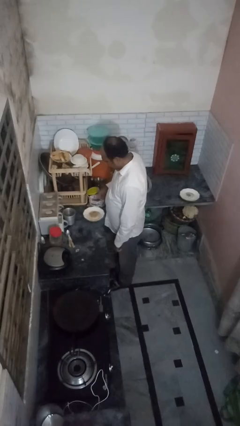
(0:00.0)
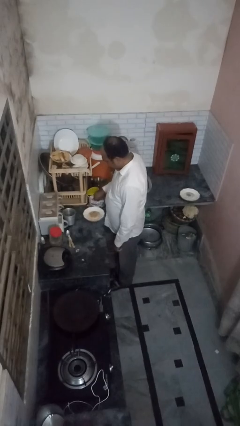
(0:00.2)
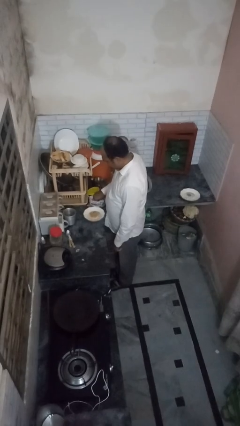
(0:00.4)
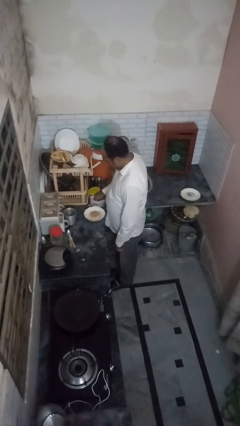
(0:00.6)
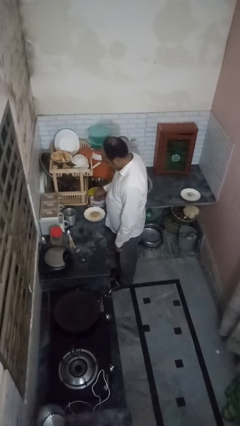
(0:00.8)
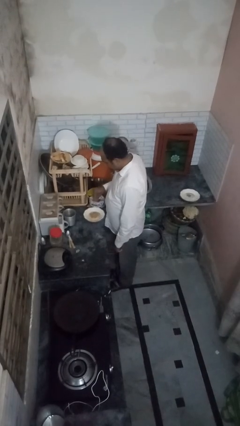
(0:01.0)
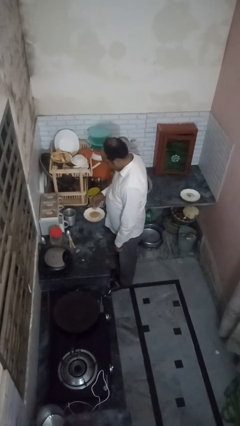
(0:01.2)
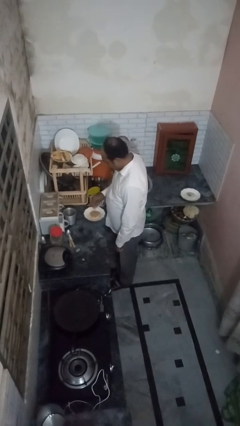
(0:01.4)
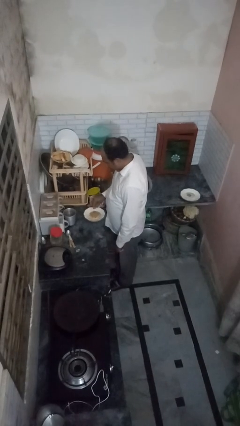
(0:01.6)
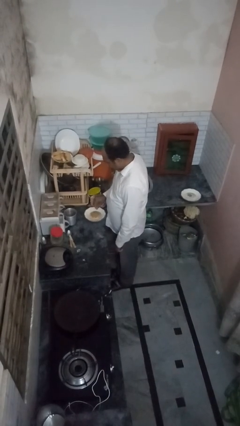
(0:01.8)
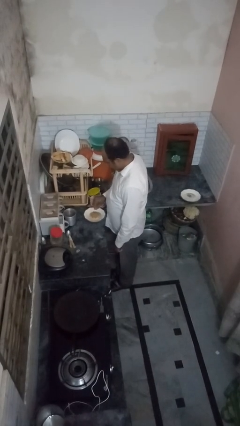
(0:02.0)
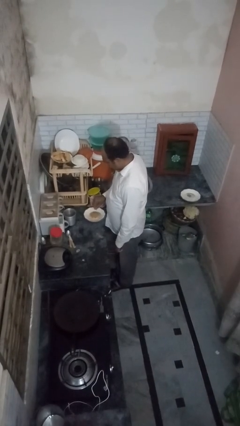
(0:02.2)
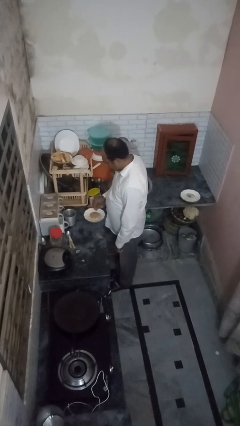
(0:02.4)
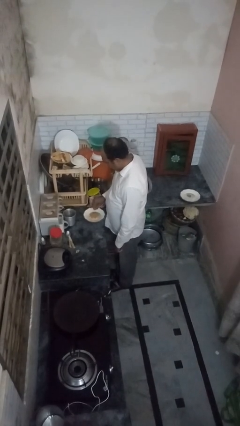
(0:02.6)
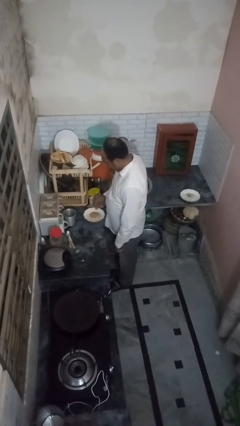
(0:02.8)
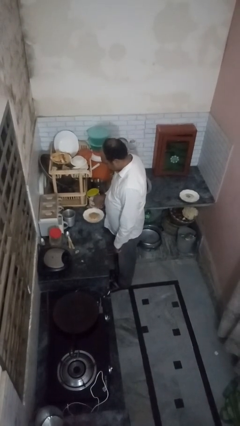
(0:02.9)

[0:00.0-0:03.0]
person pours into bowl

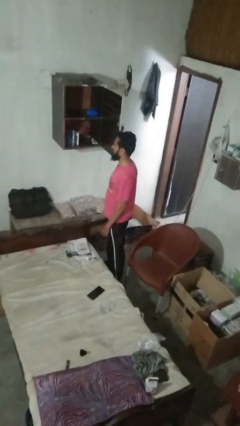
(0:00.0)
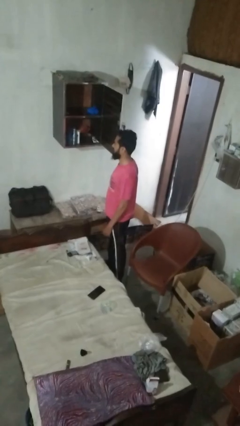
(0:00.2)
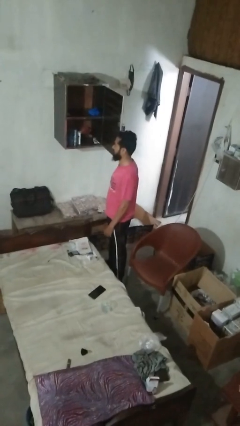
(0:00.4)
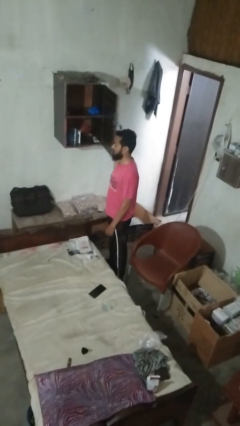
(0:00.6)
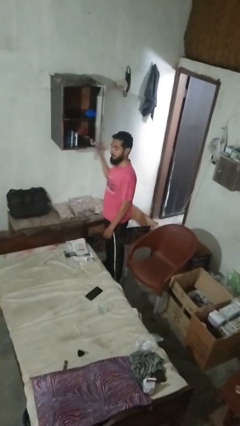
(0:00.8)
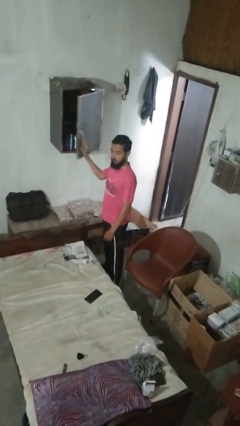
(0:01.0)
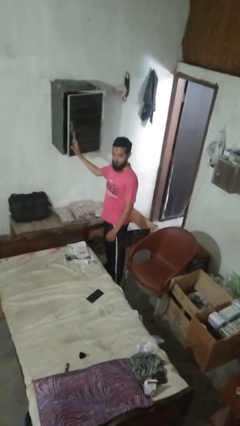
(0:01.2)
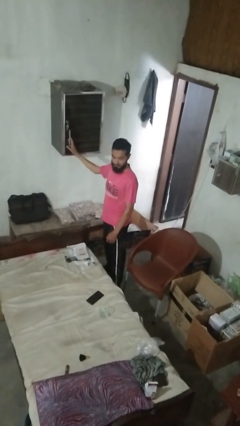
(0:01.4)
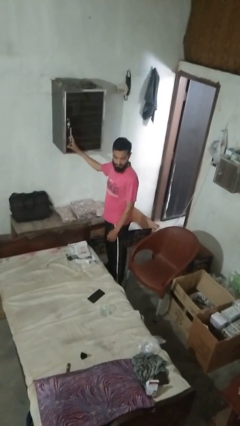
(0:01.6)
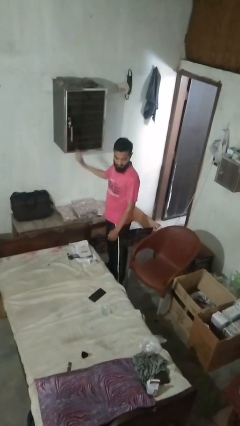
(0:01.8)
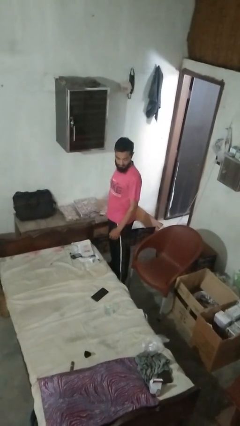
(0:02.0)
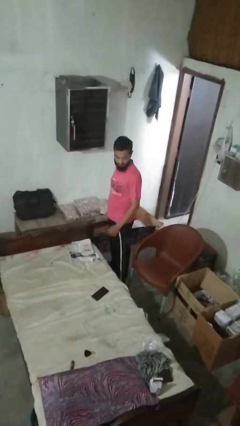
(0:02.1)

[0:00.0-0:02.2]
person closes closet door

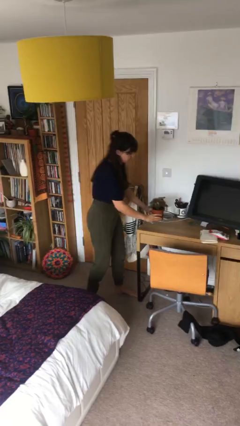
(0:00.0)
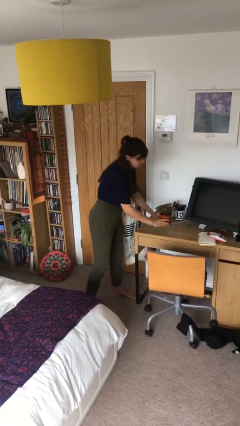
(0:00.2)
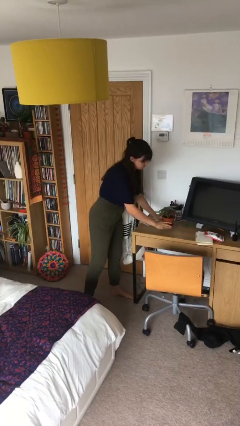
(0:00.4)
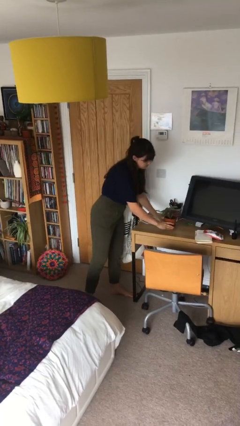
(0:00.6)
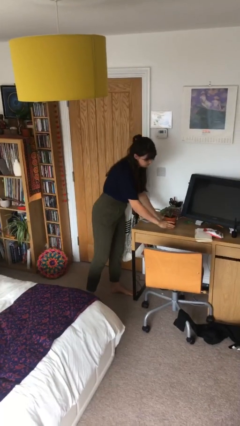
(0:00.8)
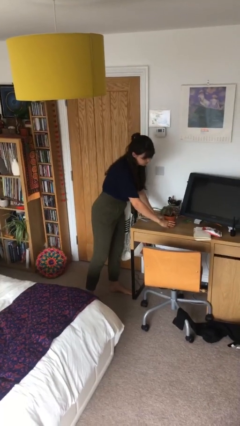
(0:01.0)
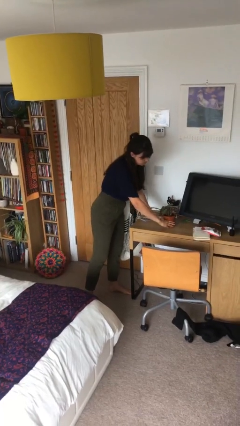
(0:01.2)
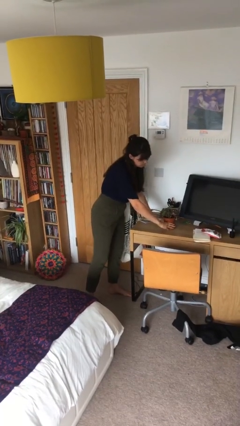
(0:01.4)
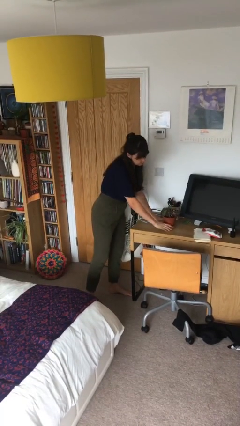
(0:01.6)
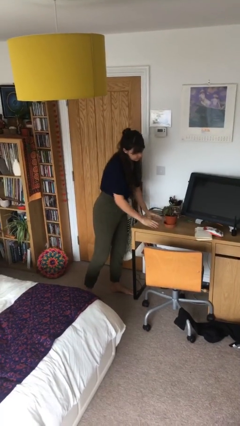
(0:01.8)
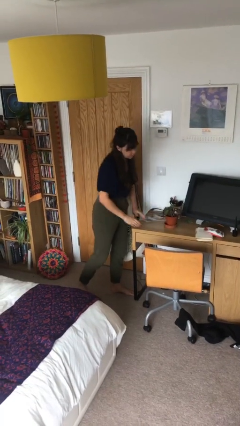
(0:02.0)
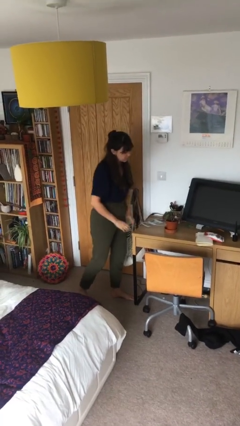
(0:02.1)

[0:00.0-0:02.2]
person puts down object on table

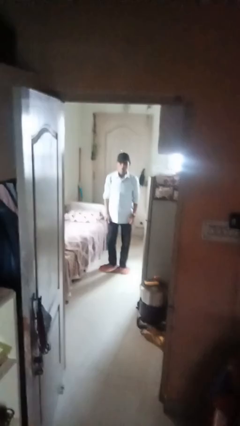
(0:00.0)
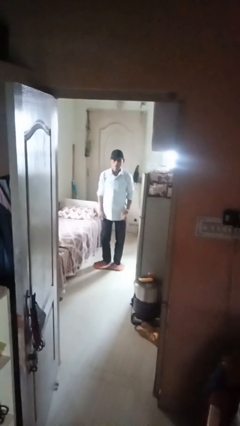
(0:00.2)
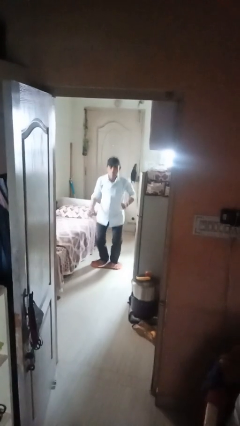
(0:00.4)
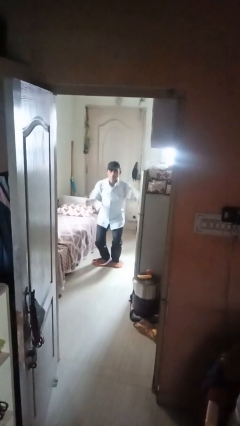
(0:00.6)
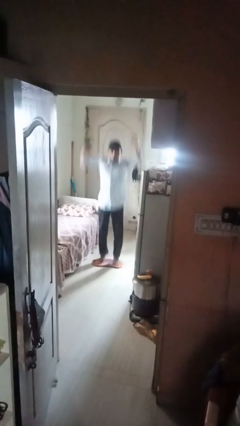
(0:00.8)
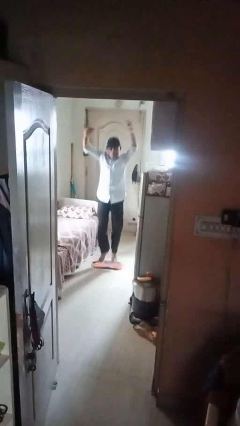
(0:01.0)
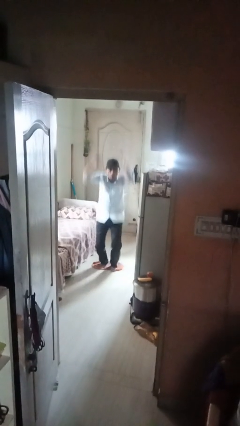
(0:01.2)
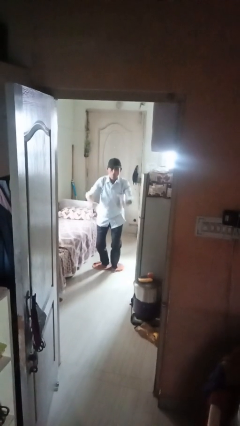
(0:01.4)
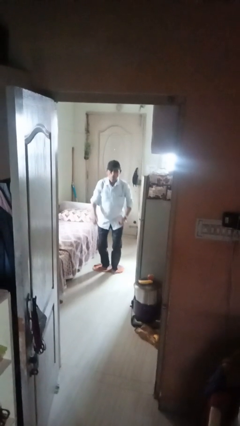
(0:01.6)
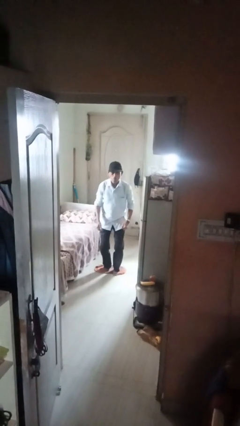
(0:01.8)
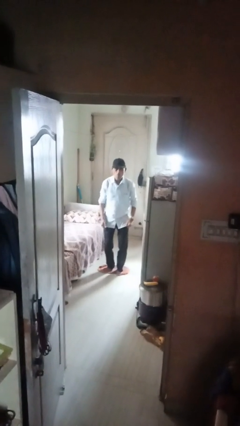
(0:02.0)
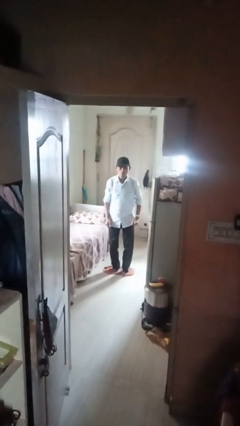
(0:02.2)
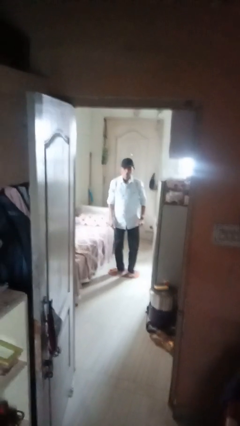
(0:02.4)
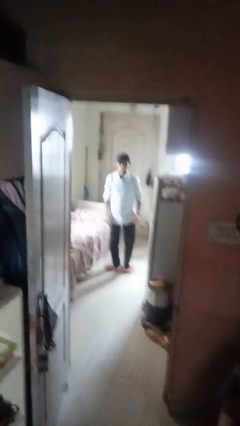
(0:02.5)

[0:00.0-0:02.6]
person jumps

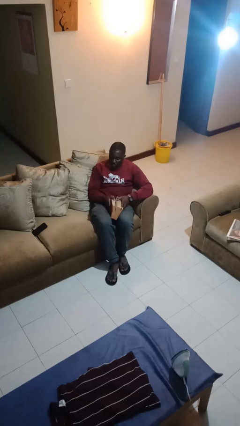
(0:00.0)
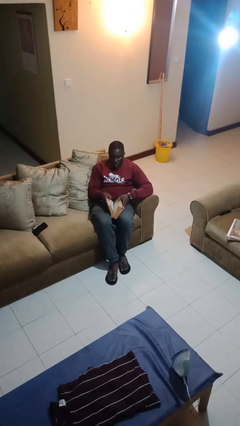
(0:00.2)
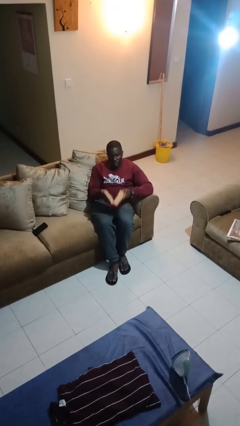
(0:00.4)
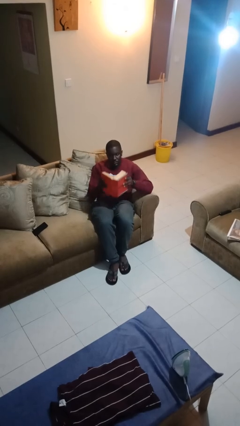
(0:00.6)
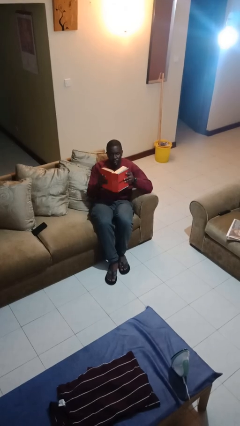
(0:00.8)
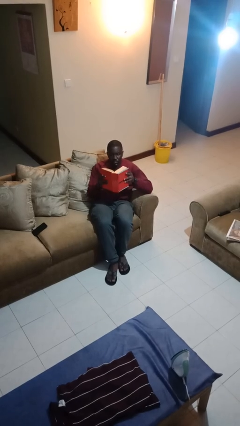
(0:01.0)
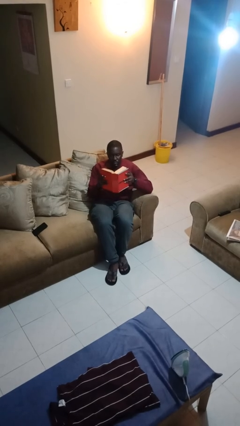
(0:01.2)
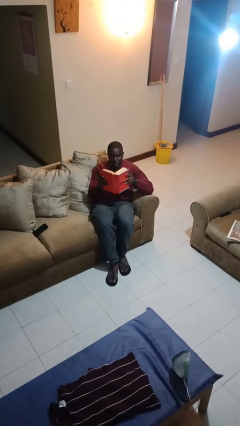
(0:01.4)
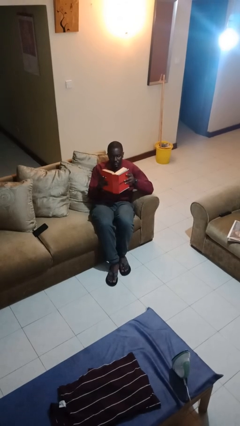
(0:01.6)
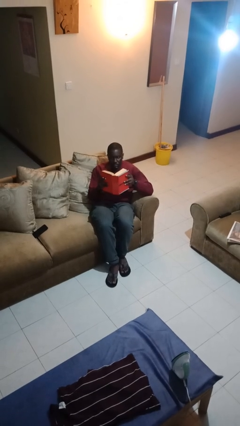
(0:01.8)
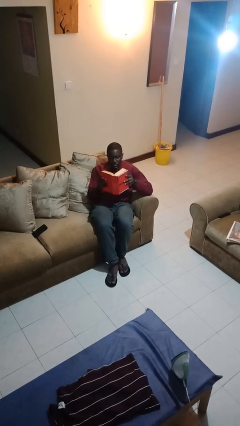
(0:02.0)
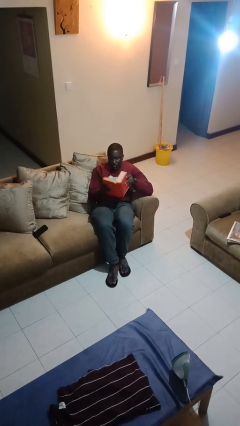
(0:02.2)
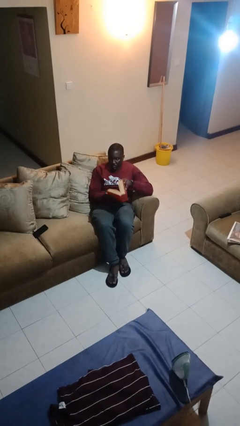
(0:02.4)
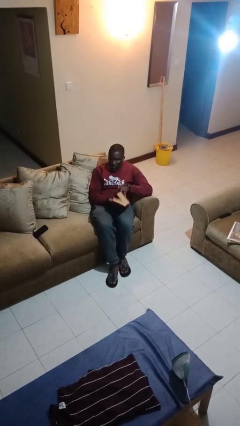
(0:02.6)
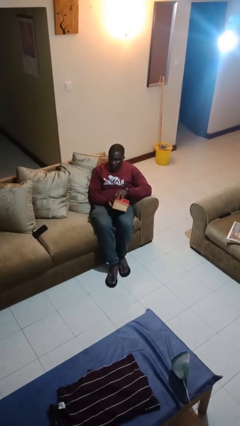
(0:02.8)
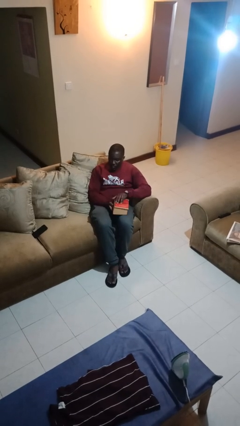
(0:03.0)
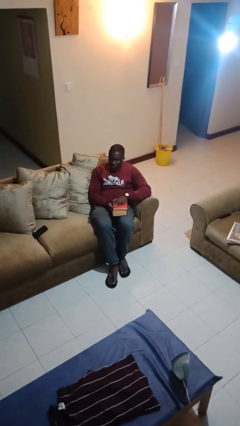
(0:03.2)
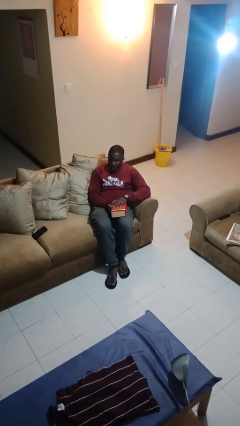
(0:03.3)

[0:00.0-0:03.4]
person reads book

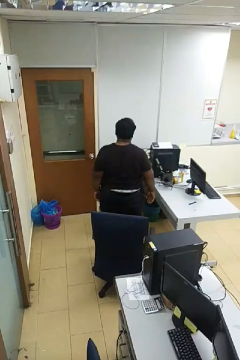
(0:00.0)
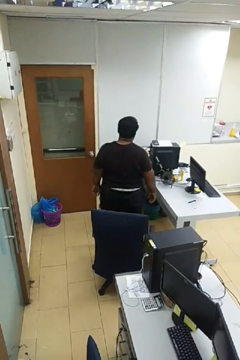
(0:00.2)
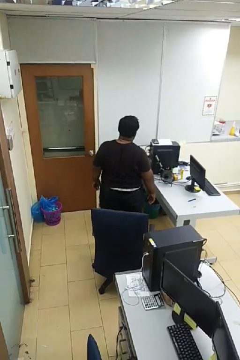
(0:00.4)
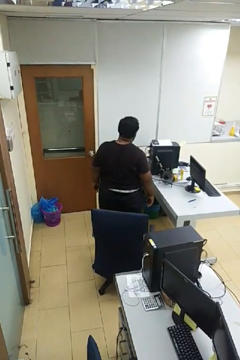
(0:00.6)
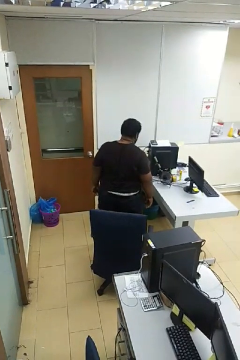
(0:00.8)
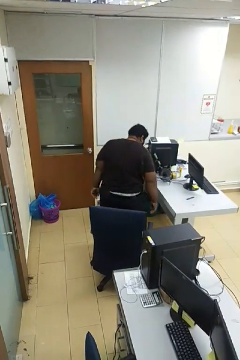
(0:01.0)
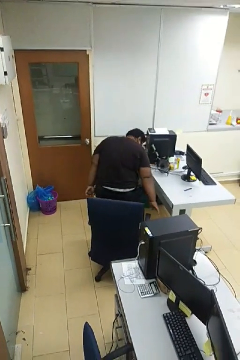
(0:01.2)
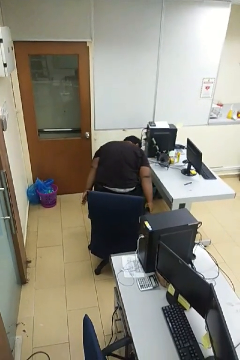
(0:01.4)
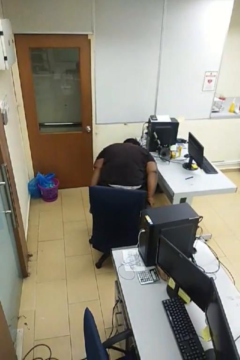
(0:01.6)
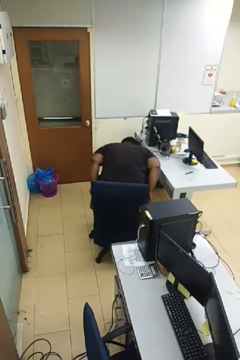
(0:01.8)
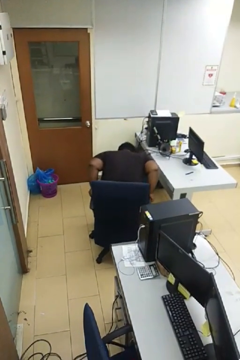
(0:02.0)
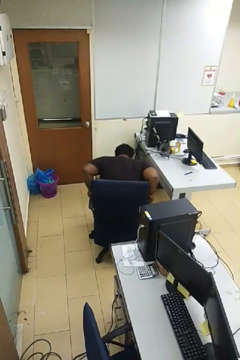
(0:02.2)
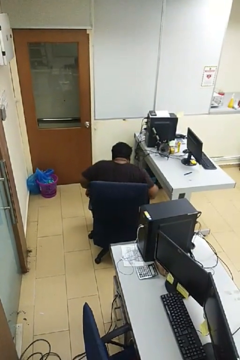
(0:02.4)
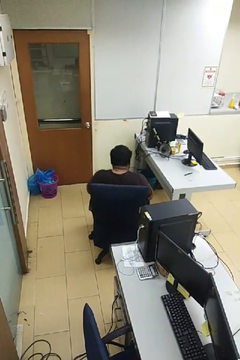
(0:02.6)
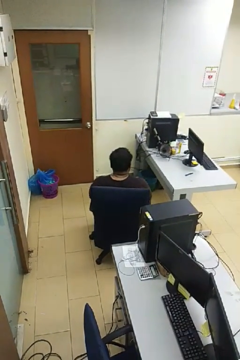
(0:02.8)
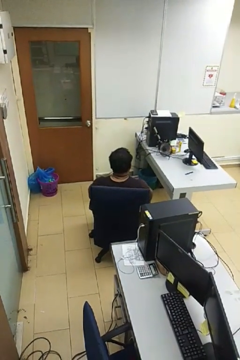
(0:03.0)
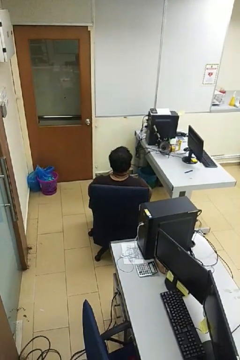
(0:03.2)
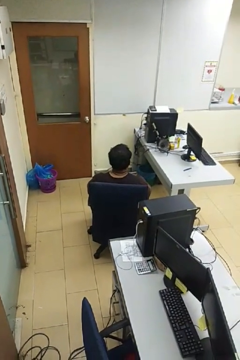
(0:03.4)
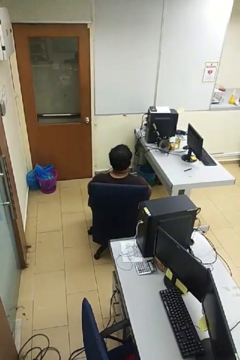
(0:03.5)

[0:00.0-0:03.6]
person sits down

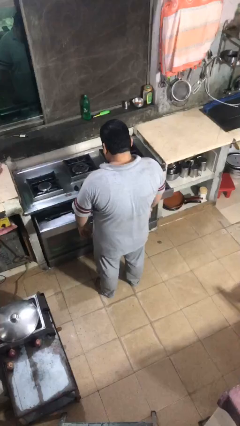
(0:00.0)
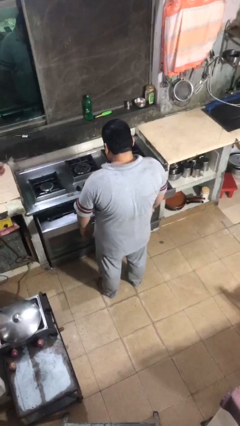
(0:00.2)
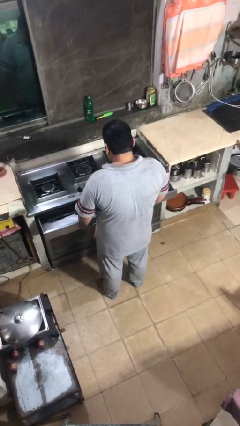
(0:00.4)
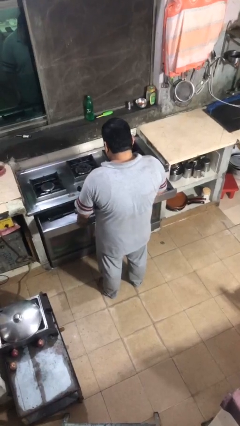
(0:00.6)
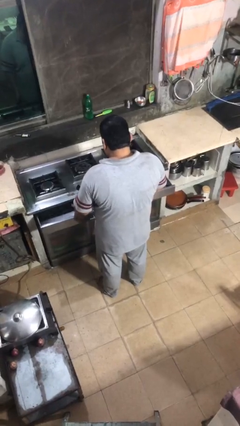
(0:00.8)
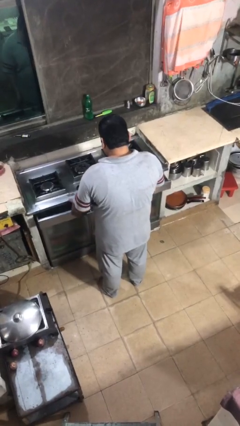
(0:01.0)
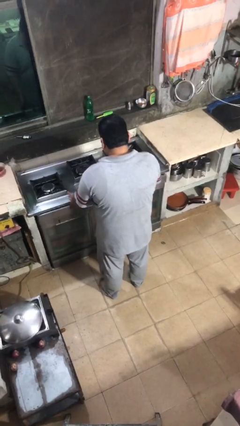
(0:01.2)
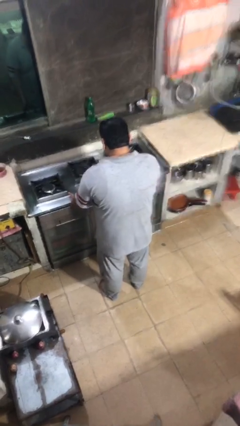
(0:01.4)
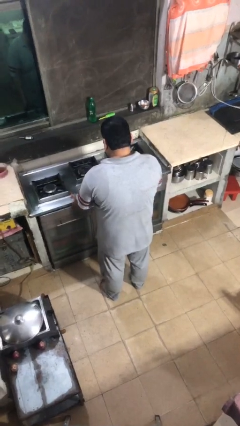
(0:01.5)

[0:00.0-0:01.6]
person closes kitchen drawer
